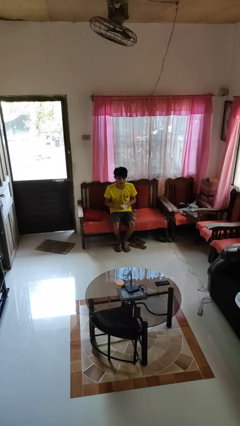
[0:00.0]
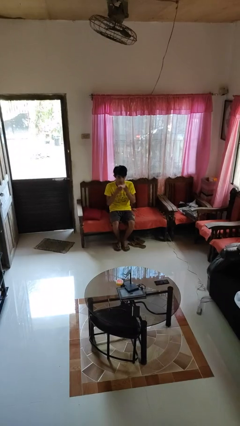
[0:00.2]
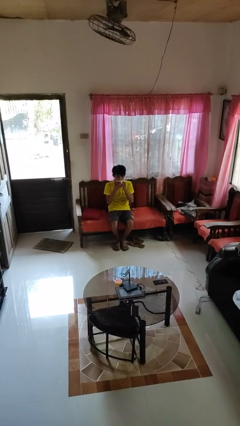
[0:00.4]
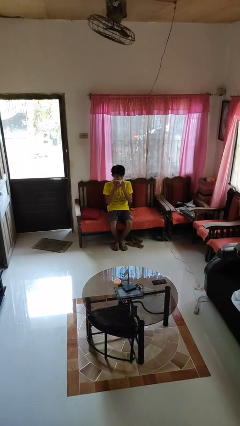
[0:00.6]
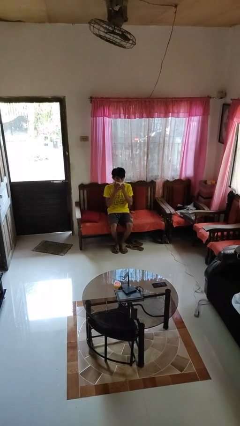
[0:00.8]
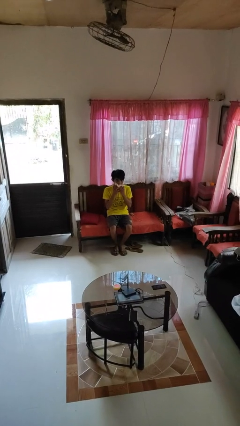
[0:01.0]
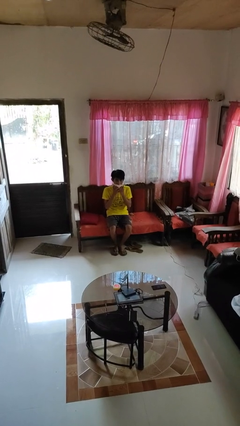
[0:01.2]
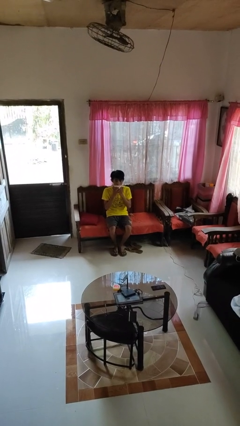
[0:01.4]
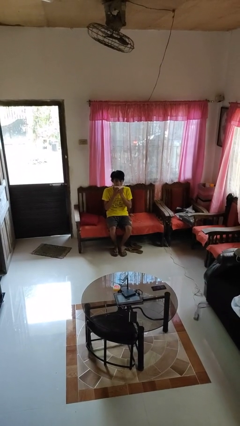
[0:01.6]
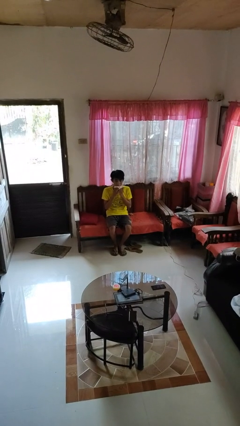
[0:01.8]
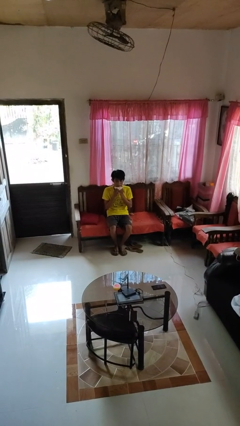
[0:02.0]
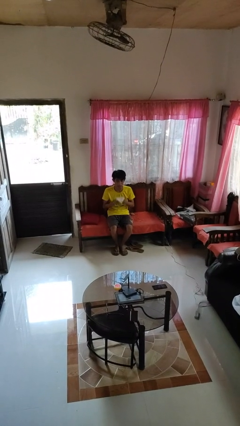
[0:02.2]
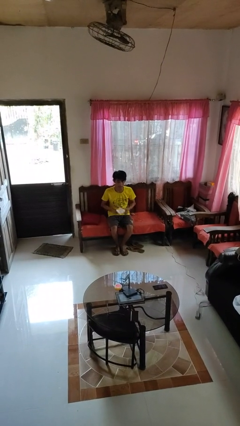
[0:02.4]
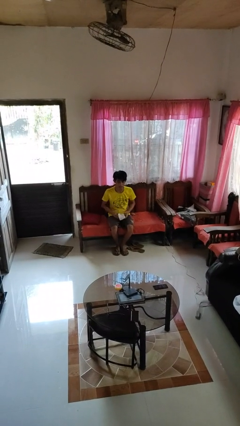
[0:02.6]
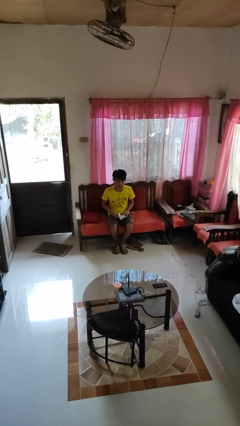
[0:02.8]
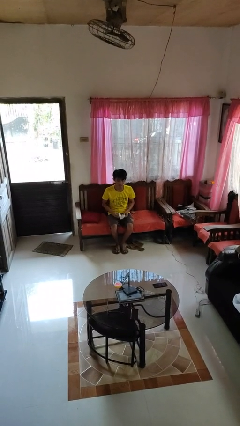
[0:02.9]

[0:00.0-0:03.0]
person wipes mouth with napkin

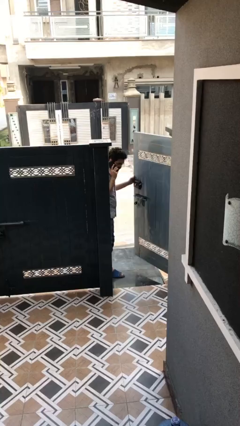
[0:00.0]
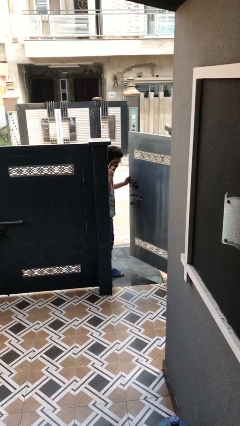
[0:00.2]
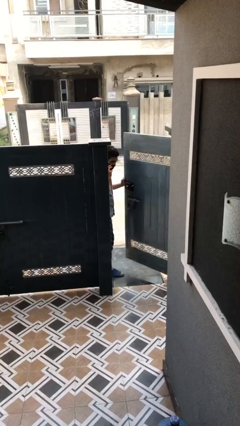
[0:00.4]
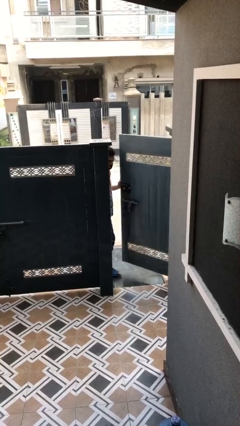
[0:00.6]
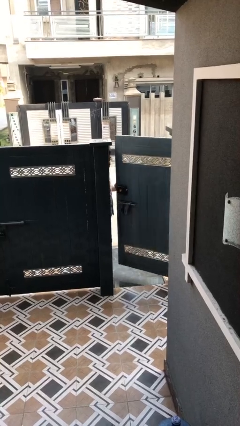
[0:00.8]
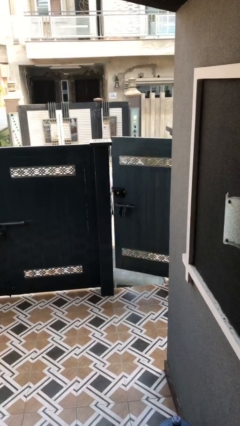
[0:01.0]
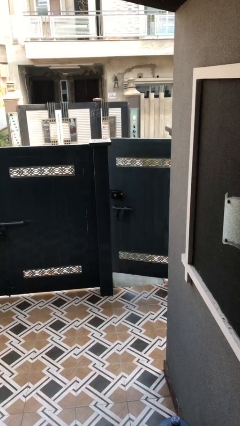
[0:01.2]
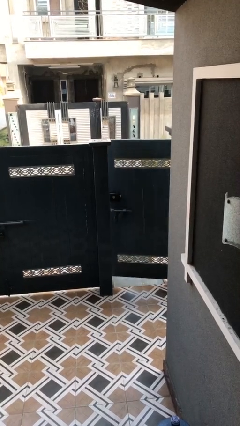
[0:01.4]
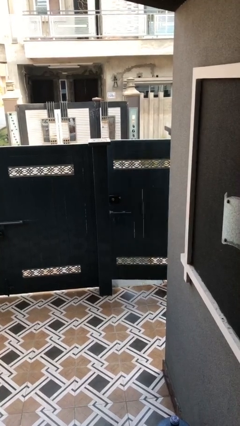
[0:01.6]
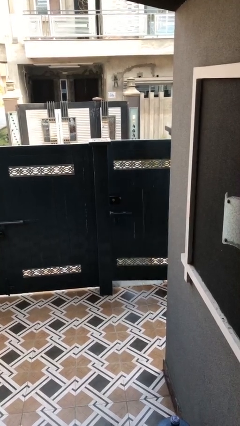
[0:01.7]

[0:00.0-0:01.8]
person closes facility door

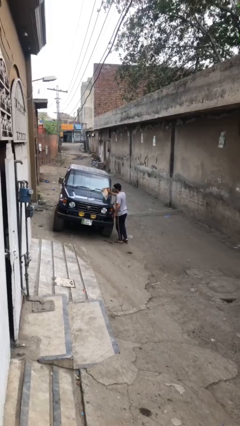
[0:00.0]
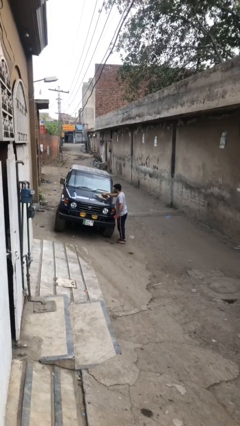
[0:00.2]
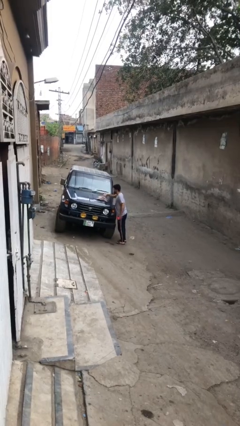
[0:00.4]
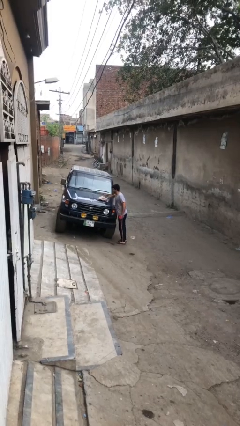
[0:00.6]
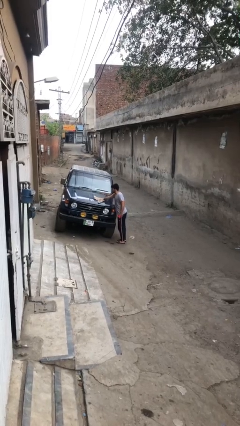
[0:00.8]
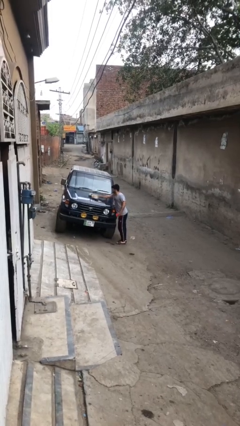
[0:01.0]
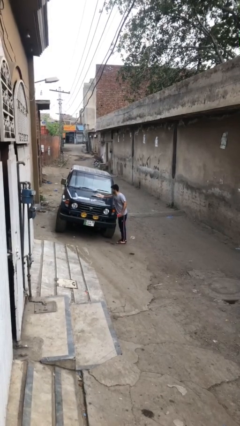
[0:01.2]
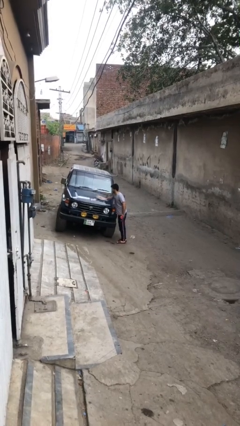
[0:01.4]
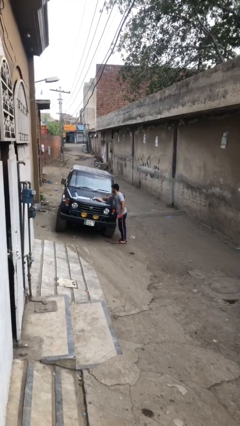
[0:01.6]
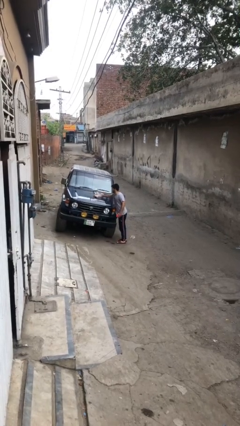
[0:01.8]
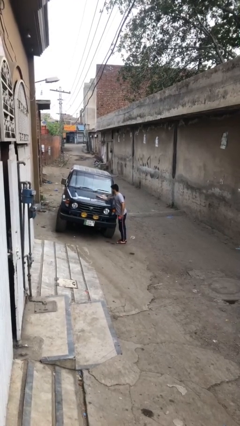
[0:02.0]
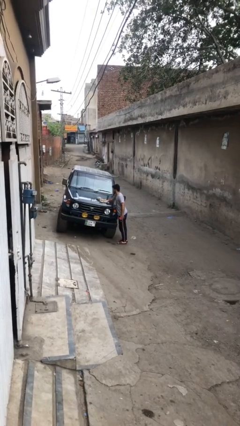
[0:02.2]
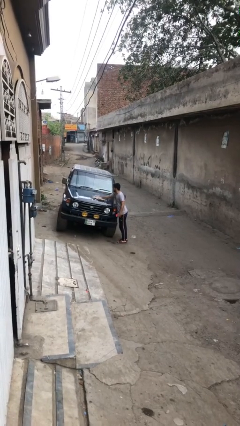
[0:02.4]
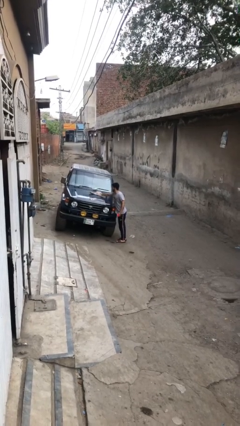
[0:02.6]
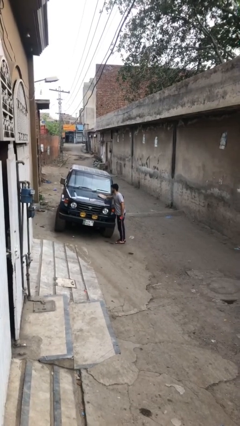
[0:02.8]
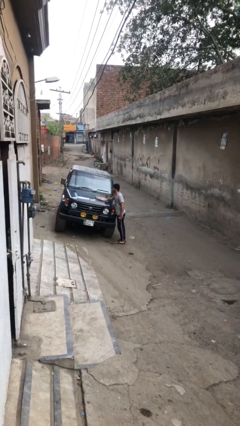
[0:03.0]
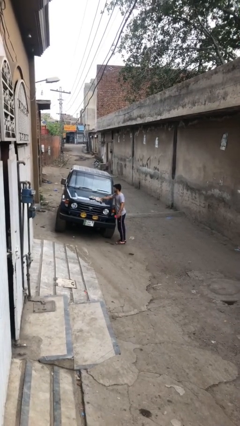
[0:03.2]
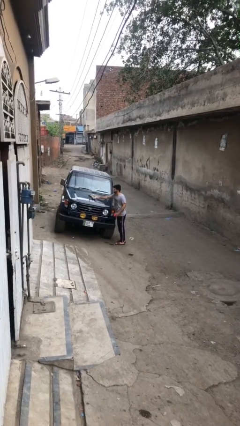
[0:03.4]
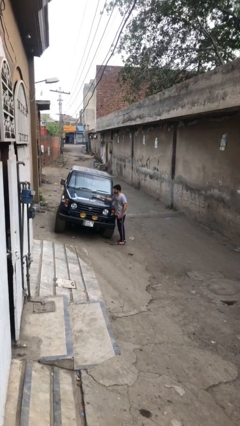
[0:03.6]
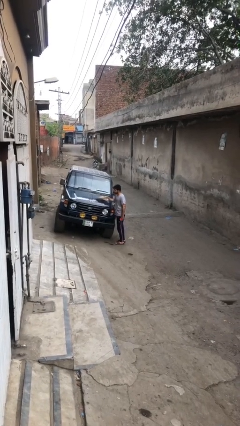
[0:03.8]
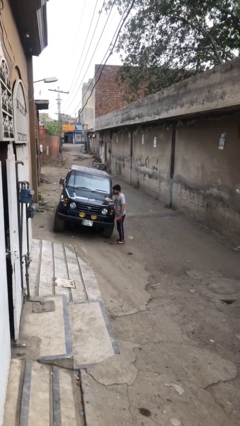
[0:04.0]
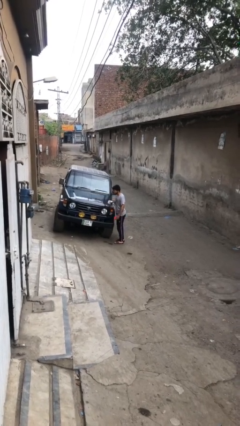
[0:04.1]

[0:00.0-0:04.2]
person polishes car with rag

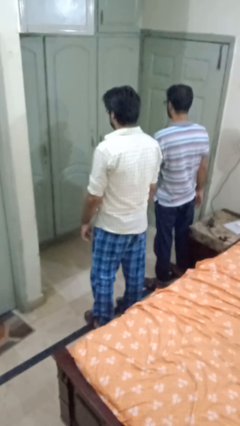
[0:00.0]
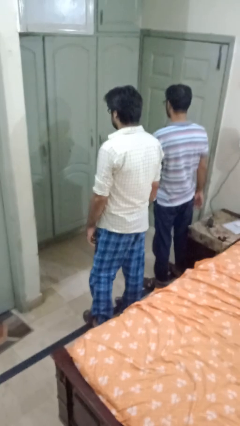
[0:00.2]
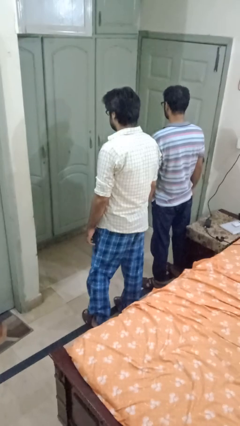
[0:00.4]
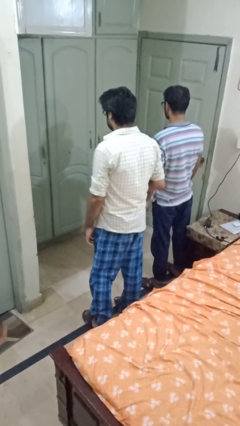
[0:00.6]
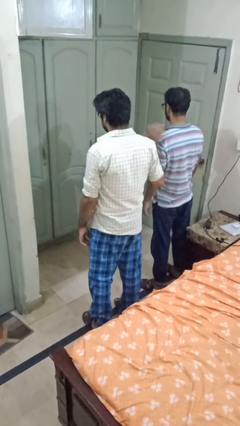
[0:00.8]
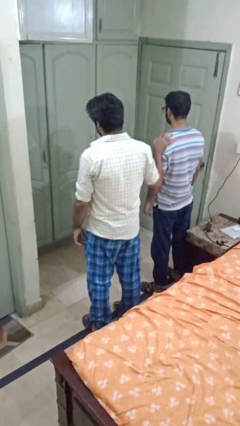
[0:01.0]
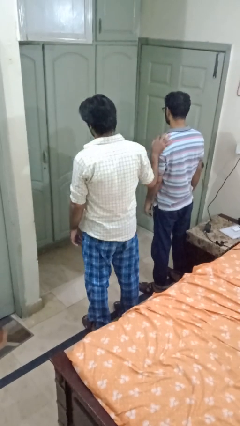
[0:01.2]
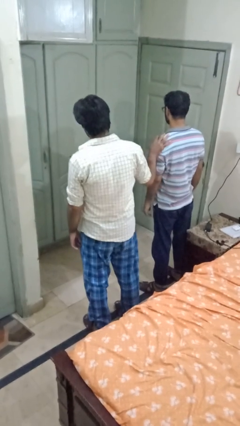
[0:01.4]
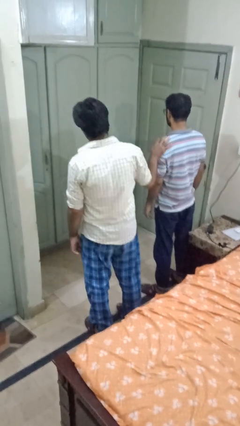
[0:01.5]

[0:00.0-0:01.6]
person grabs person by shoulder

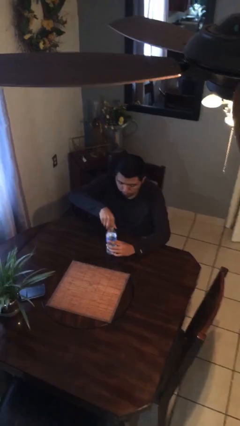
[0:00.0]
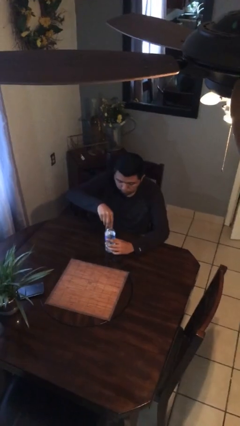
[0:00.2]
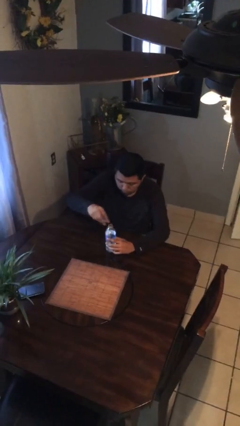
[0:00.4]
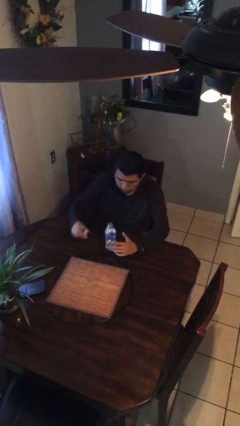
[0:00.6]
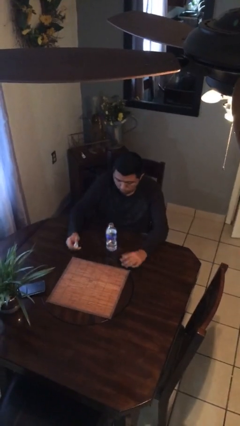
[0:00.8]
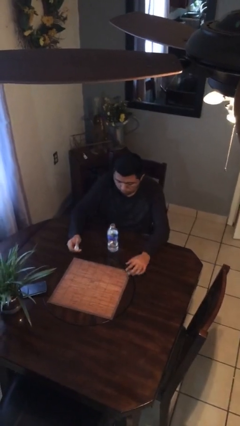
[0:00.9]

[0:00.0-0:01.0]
person unscrews lid from bottle

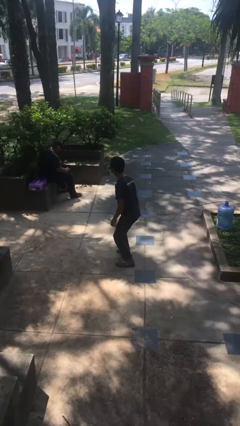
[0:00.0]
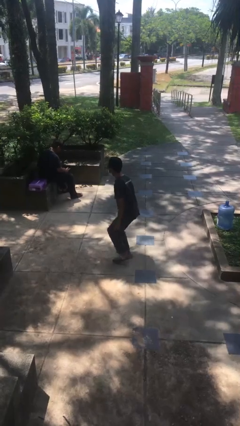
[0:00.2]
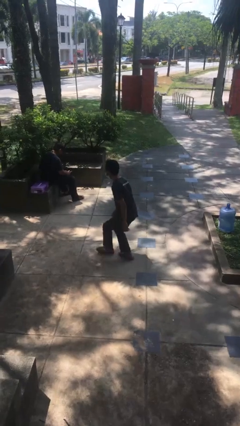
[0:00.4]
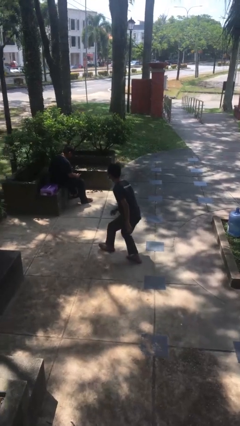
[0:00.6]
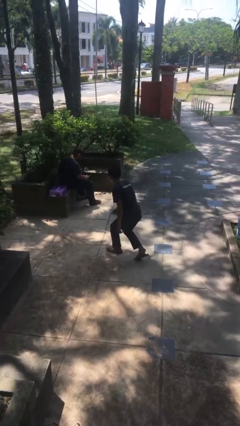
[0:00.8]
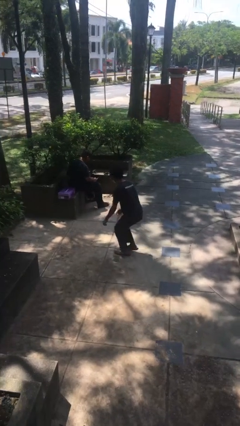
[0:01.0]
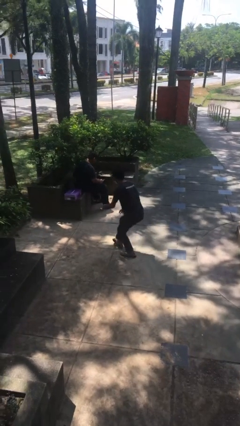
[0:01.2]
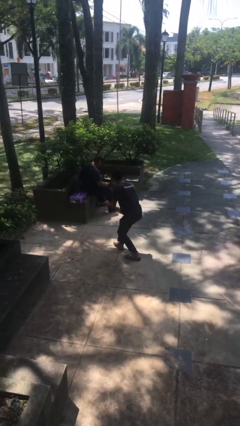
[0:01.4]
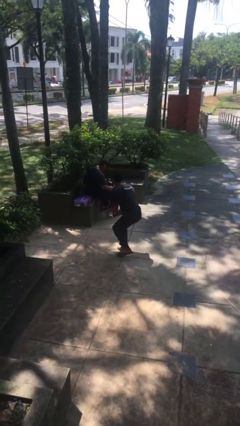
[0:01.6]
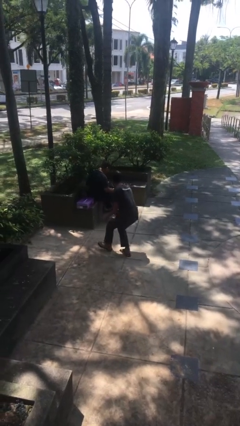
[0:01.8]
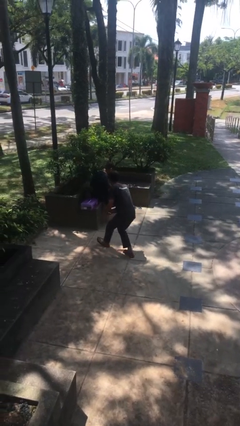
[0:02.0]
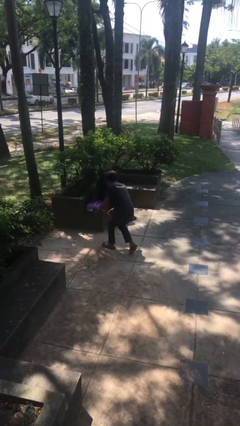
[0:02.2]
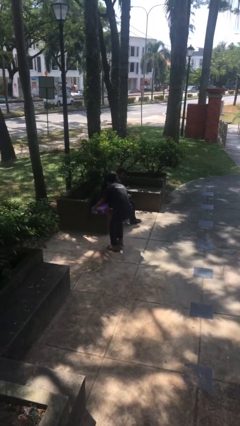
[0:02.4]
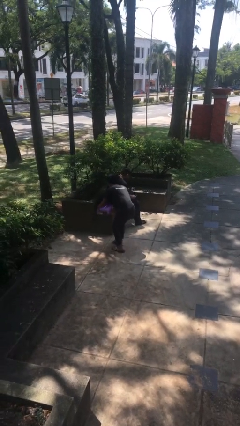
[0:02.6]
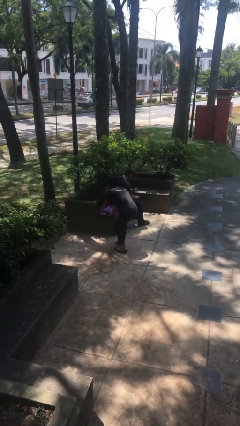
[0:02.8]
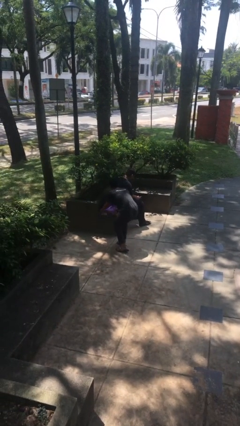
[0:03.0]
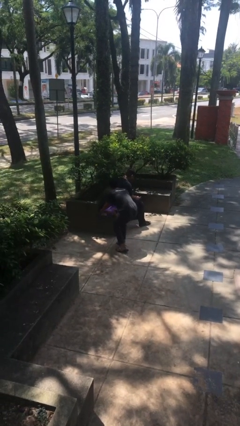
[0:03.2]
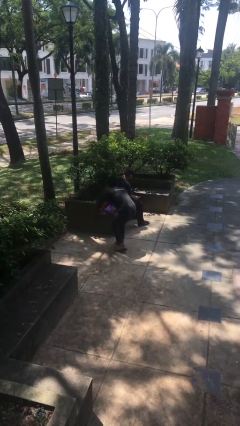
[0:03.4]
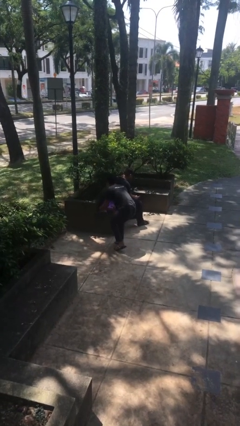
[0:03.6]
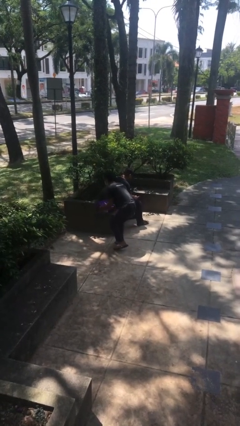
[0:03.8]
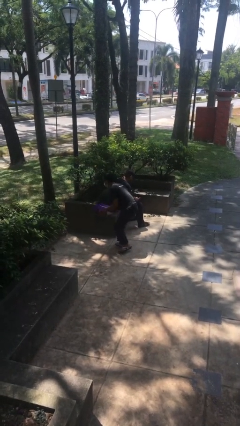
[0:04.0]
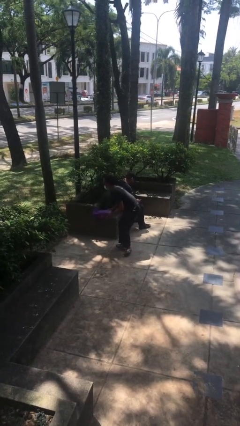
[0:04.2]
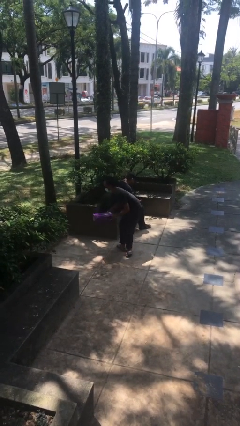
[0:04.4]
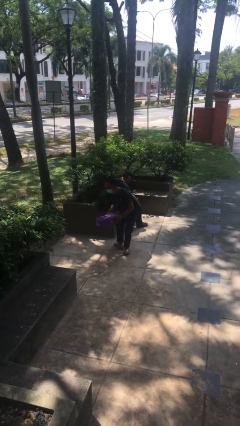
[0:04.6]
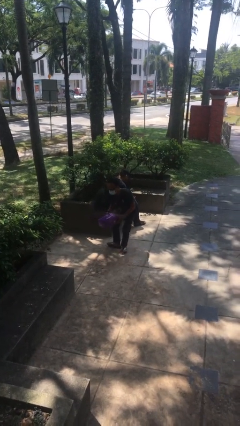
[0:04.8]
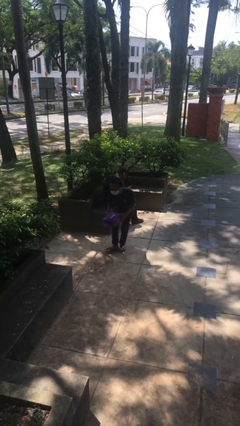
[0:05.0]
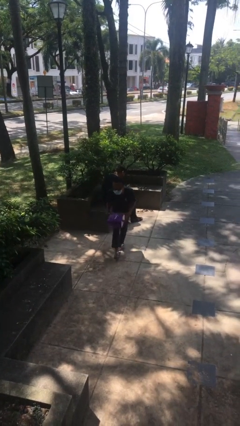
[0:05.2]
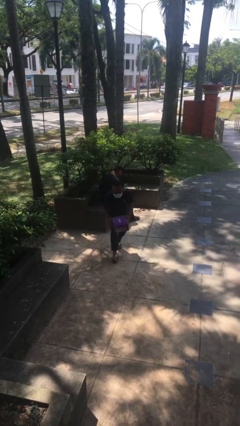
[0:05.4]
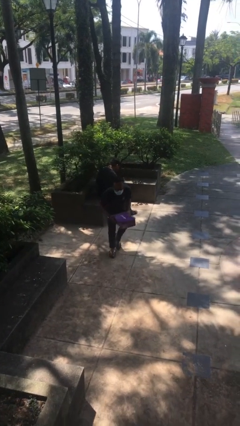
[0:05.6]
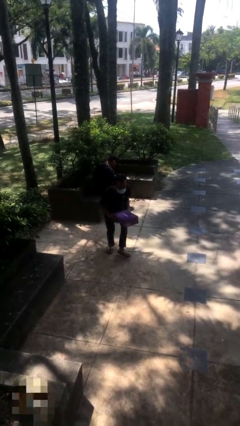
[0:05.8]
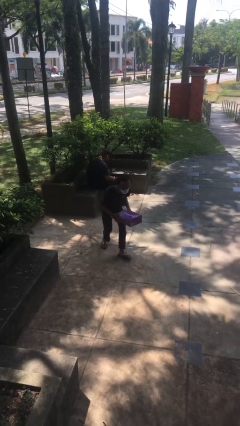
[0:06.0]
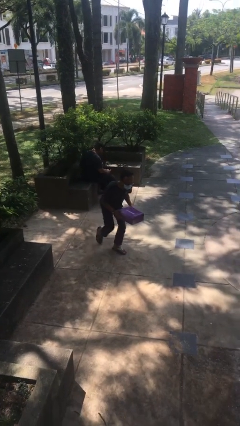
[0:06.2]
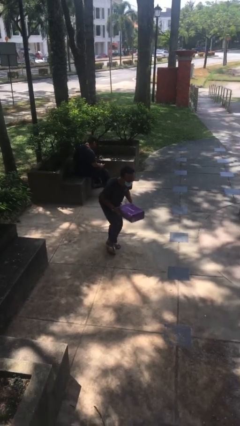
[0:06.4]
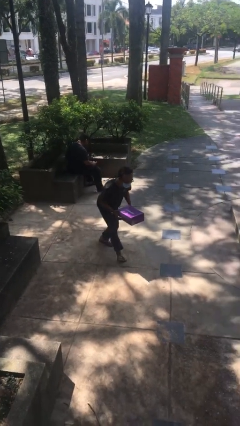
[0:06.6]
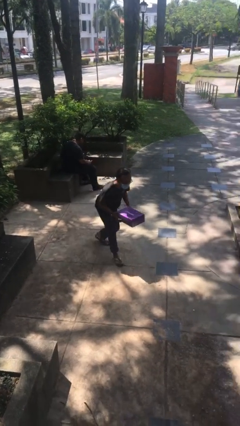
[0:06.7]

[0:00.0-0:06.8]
person steals object from person
